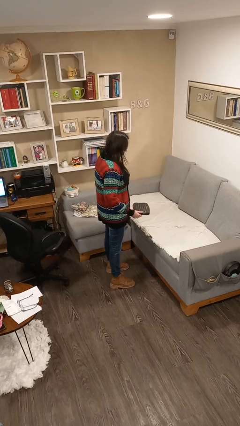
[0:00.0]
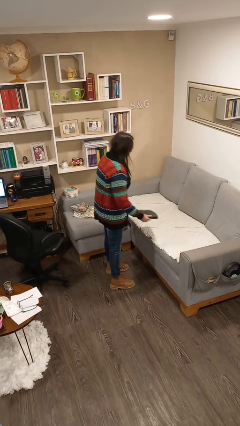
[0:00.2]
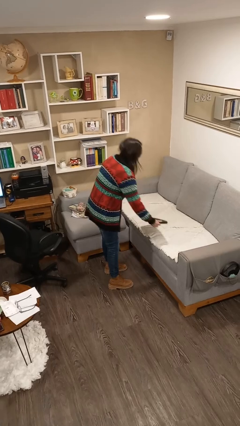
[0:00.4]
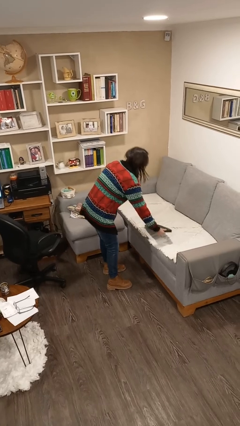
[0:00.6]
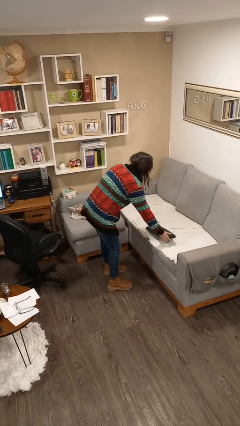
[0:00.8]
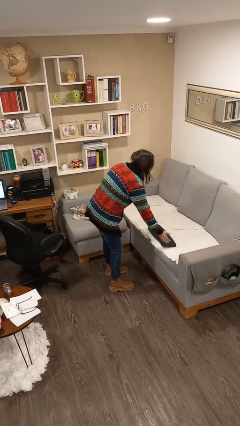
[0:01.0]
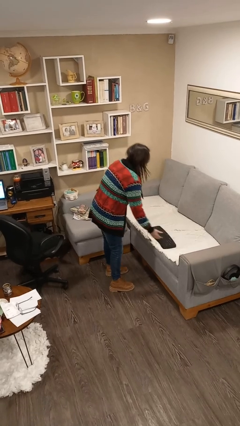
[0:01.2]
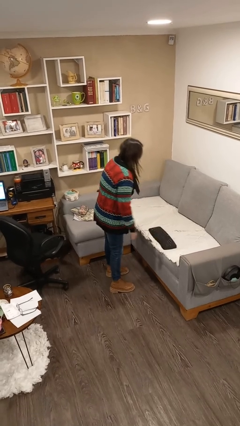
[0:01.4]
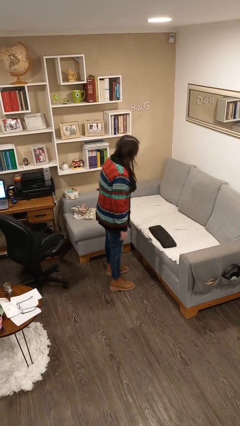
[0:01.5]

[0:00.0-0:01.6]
person puts down object on couch

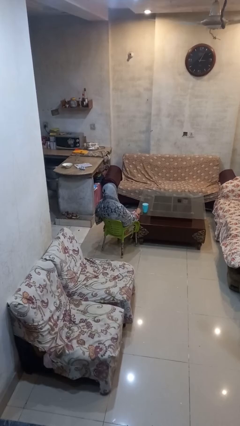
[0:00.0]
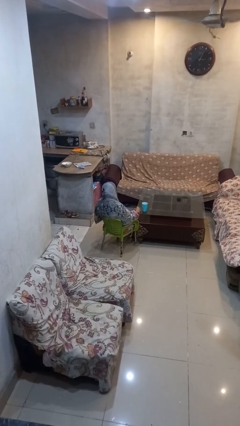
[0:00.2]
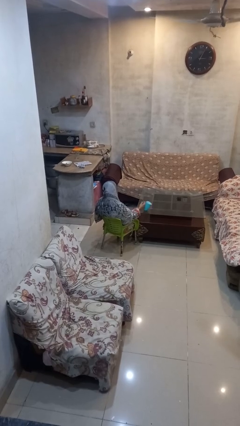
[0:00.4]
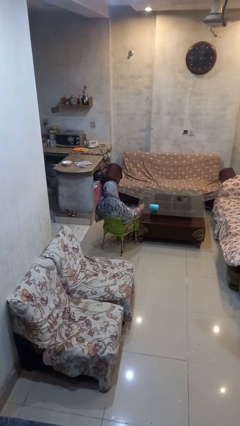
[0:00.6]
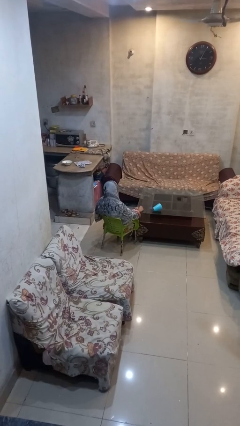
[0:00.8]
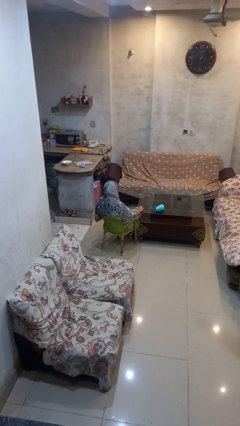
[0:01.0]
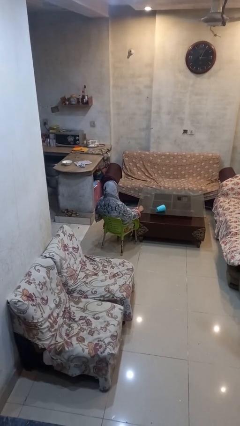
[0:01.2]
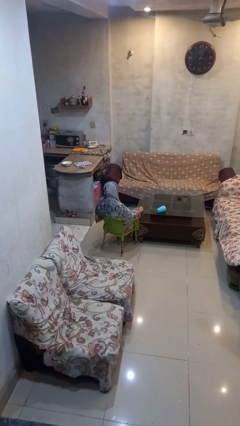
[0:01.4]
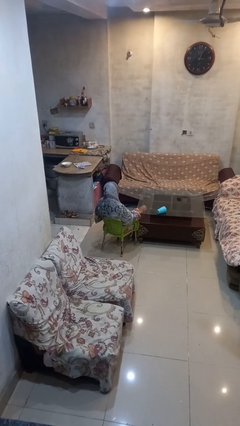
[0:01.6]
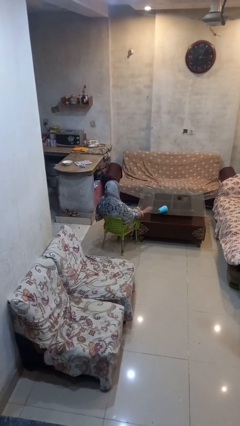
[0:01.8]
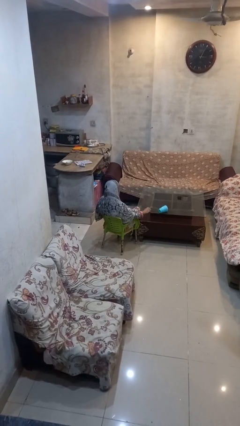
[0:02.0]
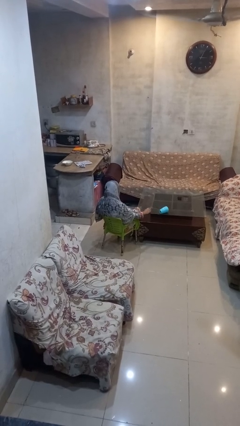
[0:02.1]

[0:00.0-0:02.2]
person knocks over glass

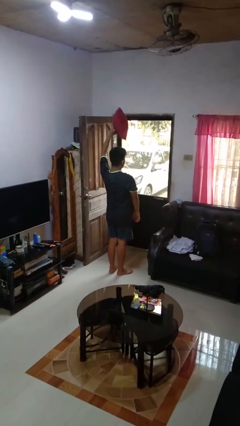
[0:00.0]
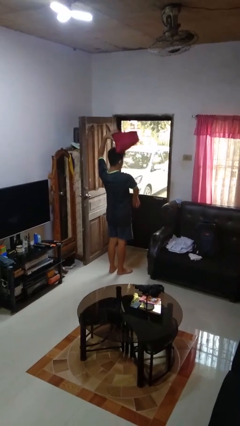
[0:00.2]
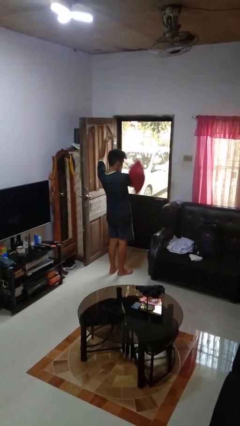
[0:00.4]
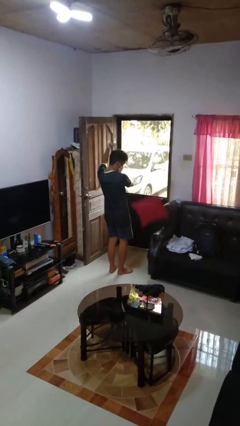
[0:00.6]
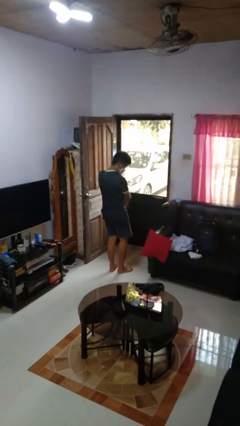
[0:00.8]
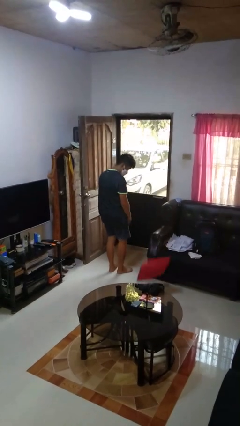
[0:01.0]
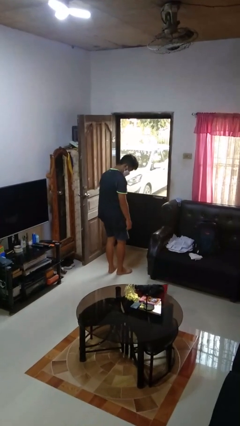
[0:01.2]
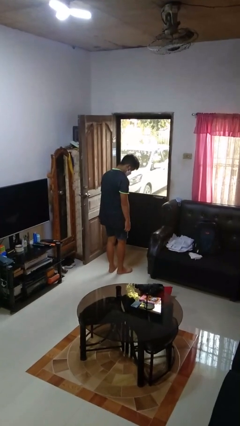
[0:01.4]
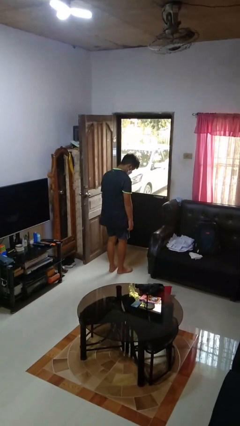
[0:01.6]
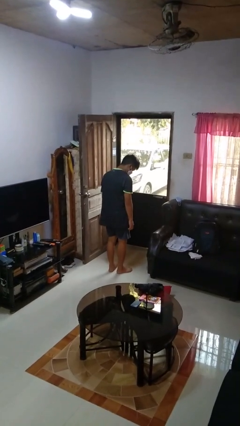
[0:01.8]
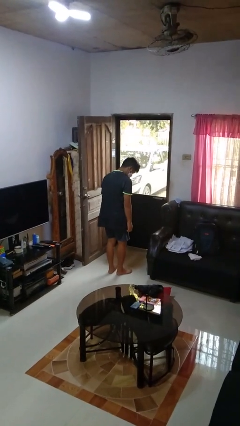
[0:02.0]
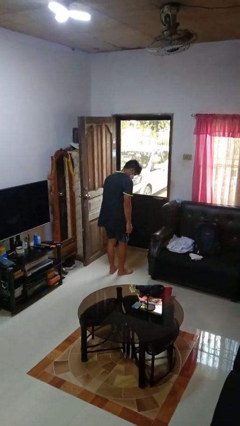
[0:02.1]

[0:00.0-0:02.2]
person drops object

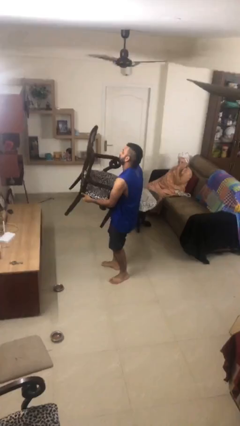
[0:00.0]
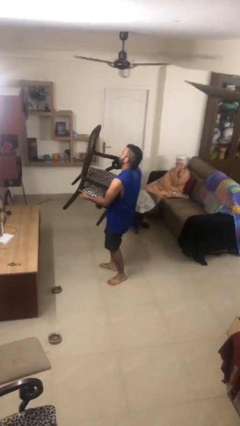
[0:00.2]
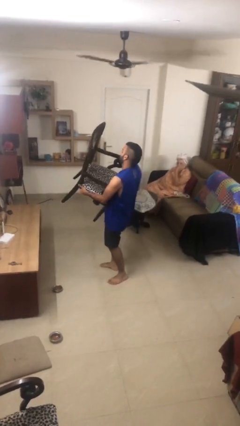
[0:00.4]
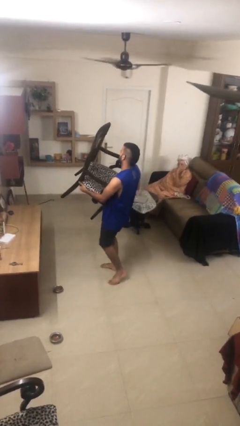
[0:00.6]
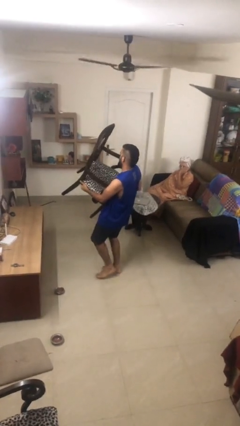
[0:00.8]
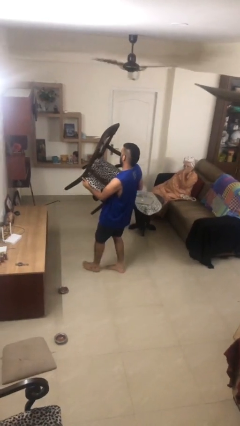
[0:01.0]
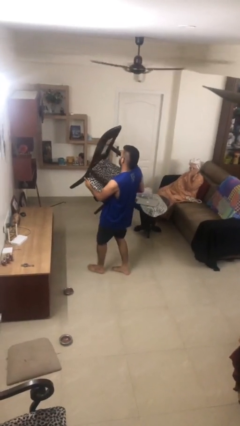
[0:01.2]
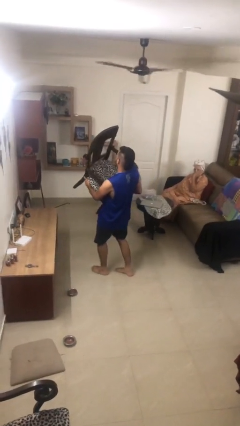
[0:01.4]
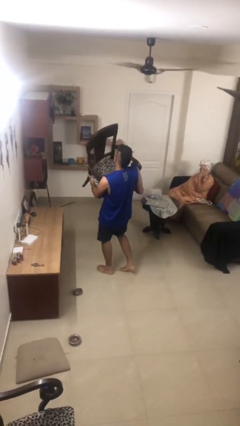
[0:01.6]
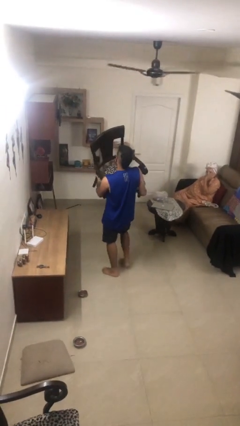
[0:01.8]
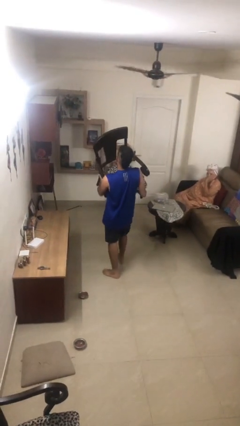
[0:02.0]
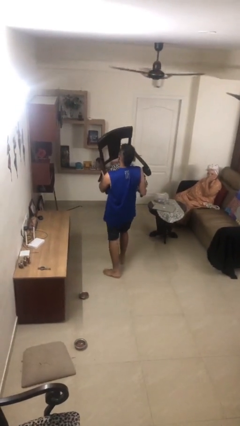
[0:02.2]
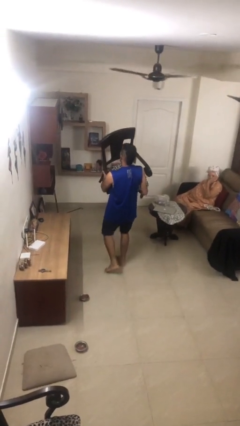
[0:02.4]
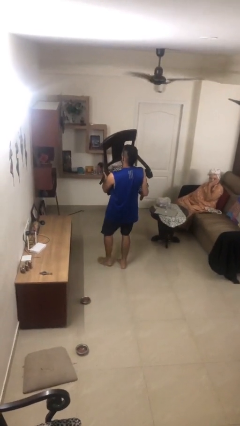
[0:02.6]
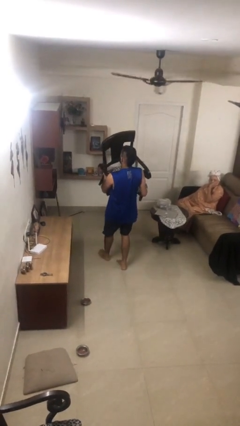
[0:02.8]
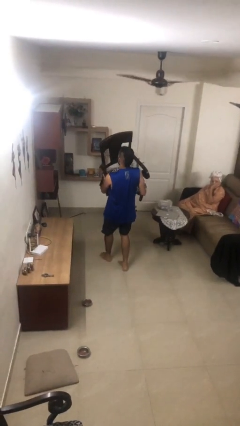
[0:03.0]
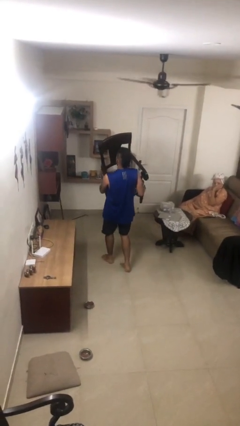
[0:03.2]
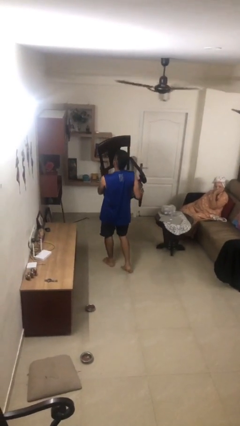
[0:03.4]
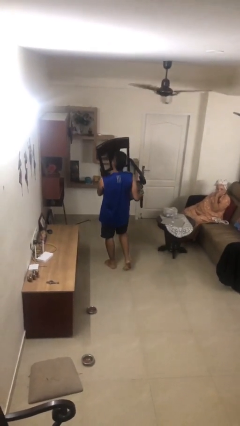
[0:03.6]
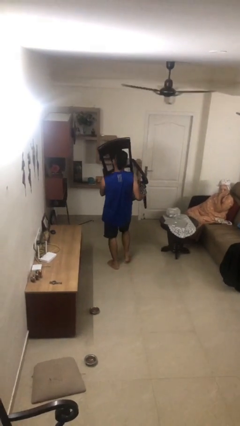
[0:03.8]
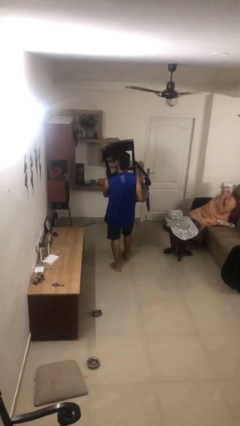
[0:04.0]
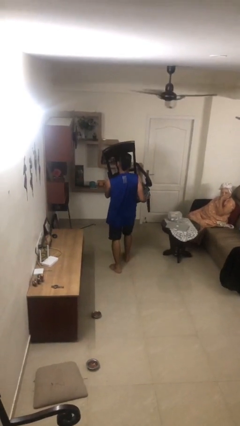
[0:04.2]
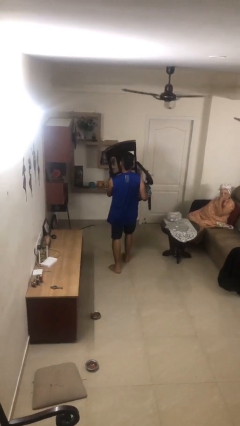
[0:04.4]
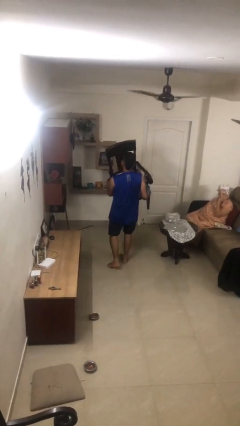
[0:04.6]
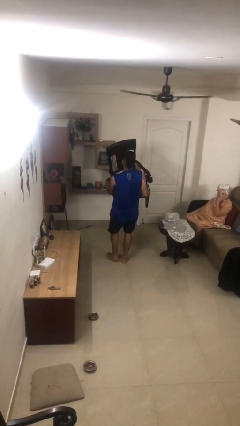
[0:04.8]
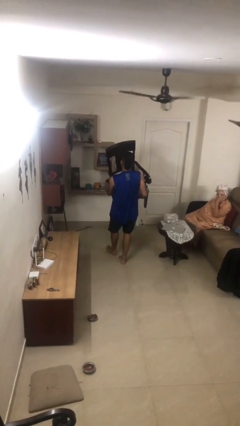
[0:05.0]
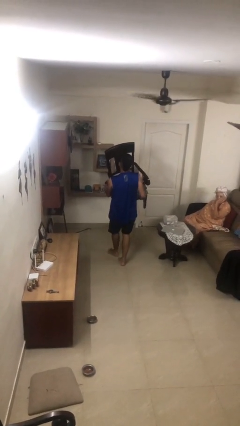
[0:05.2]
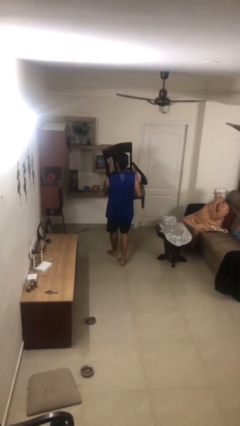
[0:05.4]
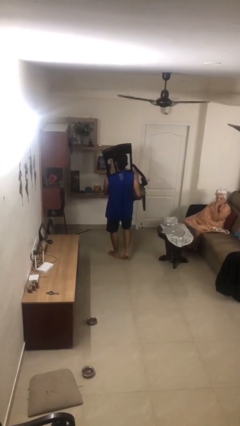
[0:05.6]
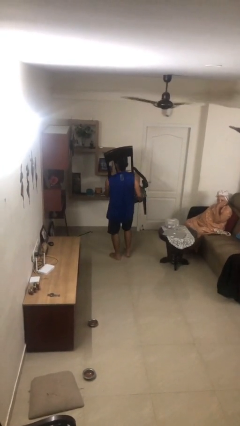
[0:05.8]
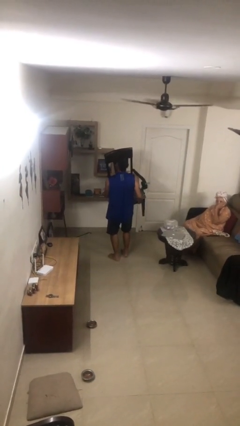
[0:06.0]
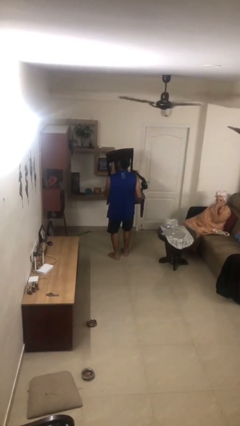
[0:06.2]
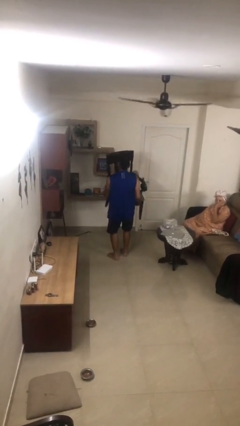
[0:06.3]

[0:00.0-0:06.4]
person carries heavy object

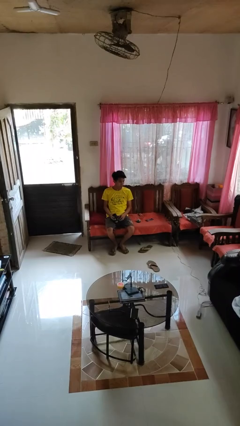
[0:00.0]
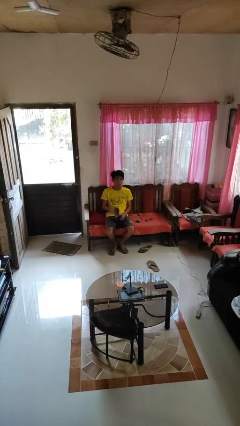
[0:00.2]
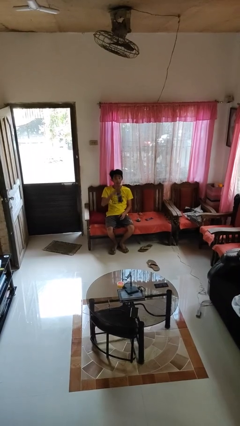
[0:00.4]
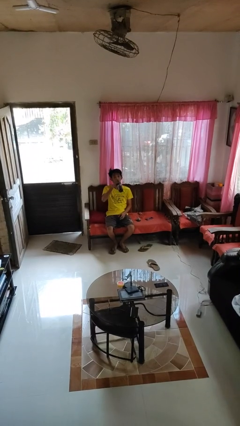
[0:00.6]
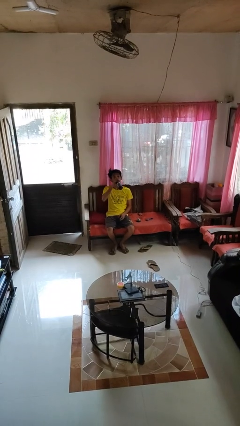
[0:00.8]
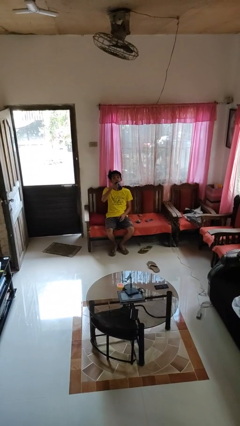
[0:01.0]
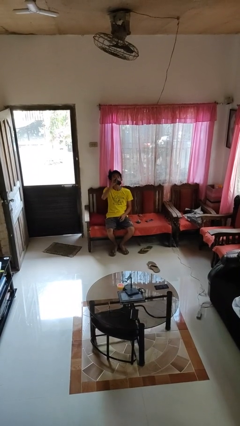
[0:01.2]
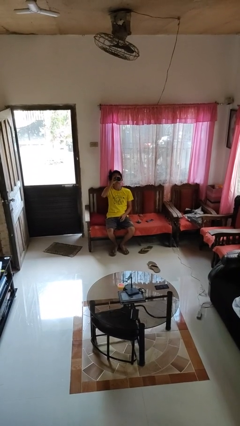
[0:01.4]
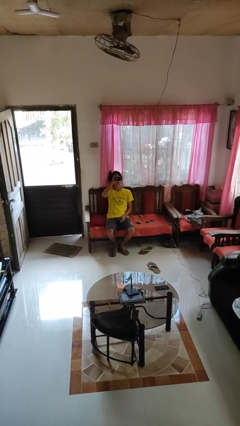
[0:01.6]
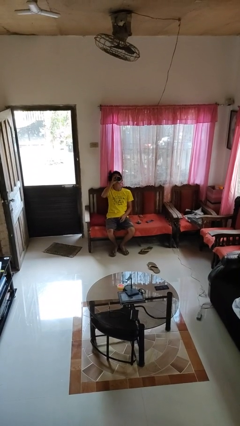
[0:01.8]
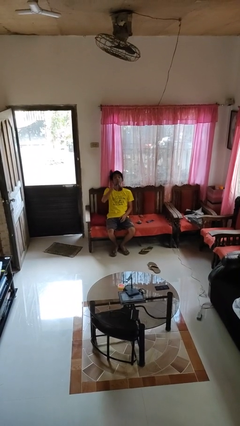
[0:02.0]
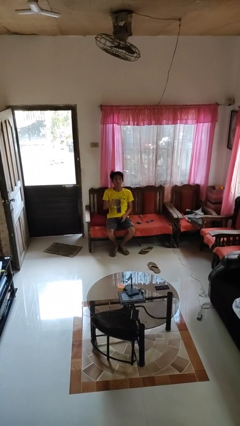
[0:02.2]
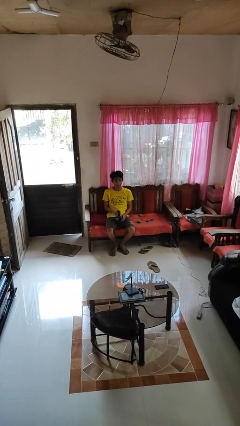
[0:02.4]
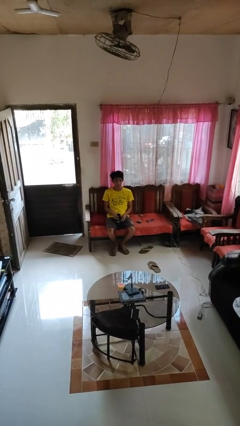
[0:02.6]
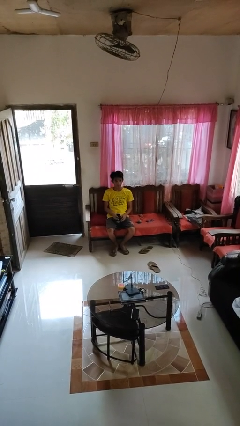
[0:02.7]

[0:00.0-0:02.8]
person drinks from bottle

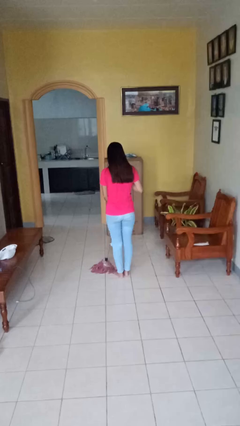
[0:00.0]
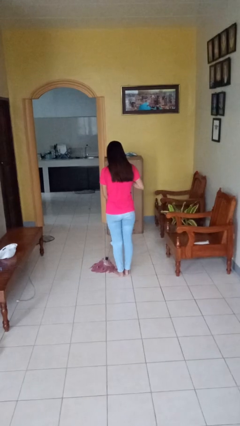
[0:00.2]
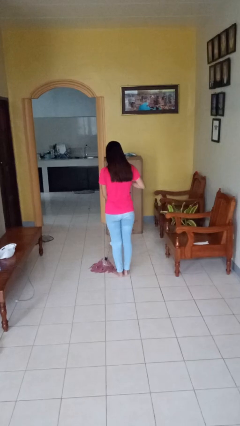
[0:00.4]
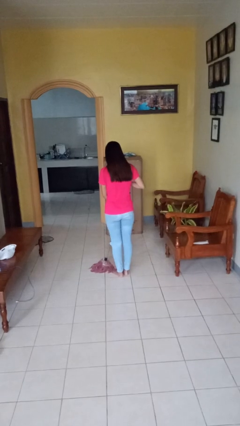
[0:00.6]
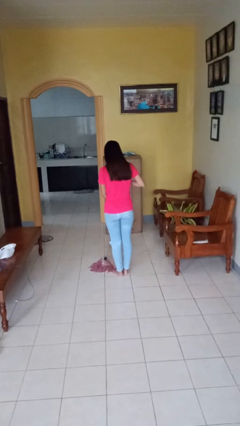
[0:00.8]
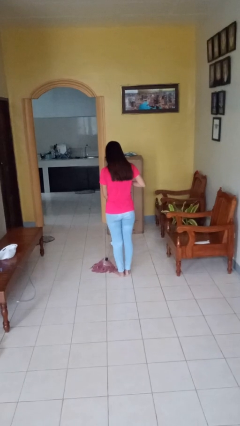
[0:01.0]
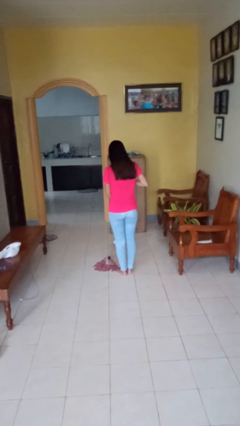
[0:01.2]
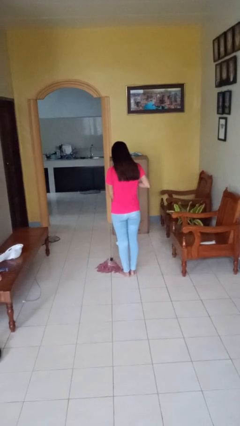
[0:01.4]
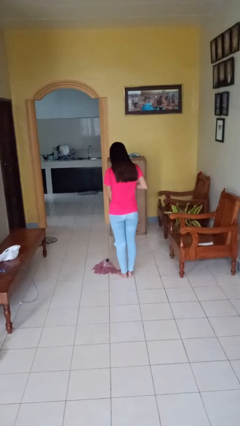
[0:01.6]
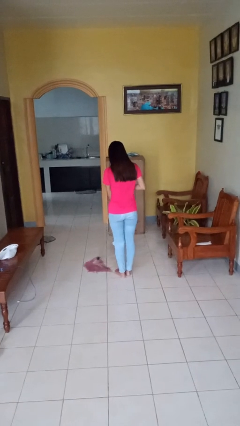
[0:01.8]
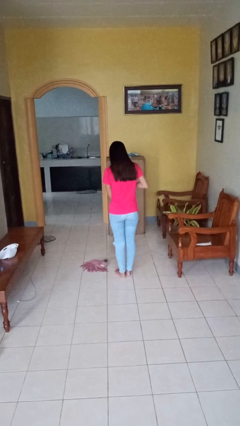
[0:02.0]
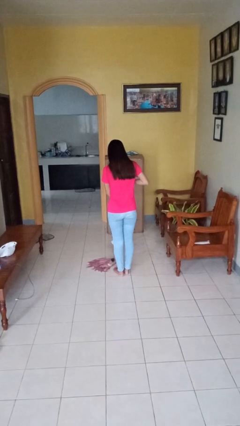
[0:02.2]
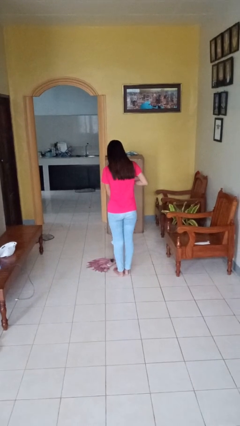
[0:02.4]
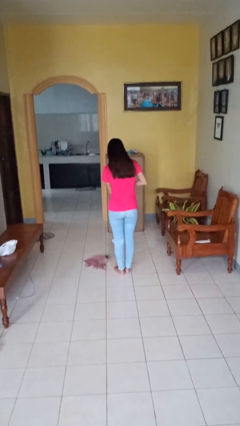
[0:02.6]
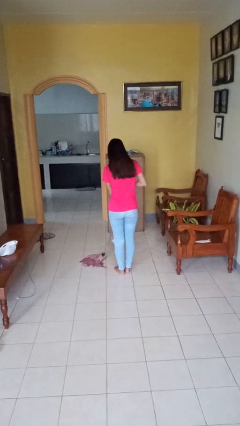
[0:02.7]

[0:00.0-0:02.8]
person mops
